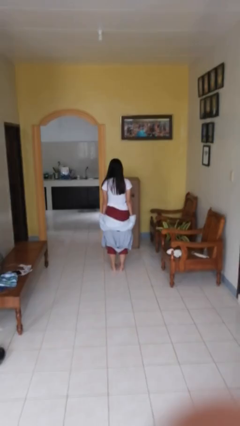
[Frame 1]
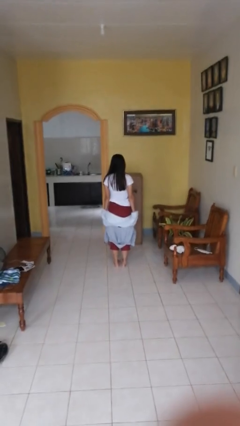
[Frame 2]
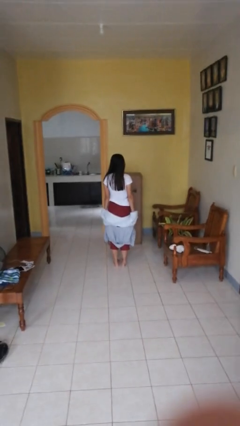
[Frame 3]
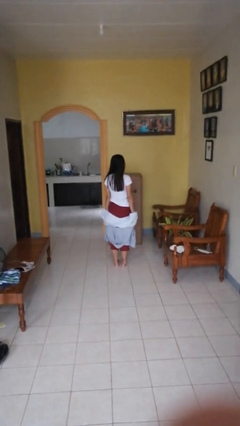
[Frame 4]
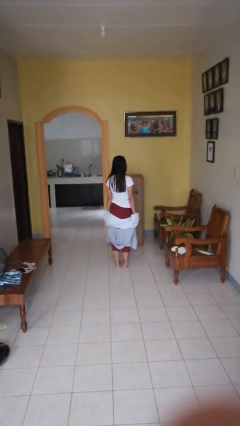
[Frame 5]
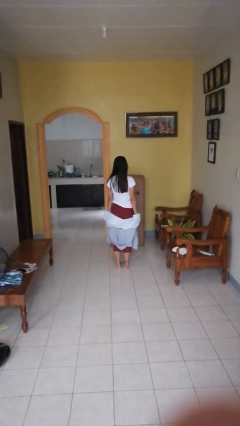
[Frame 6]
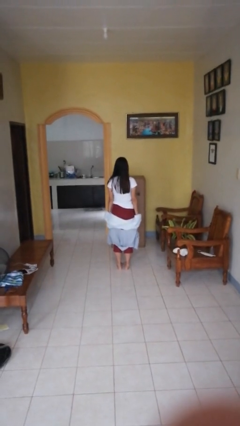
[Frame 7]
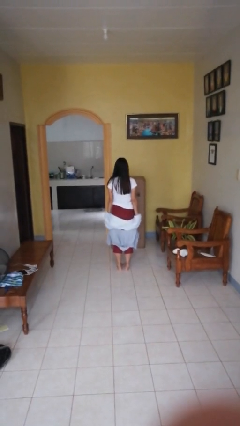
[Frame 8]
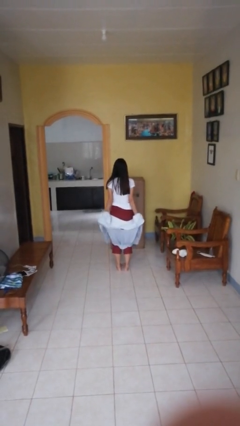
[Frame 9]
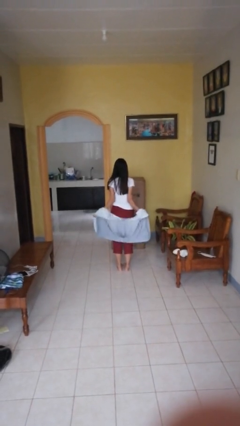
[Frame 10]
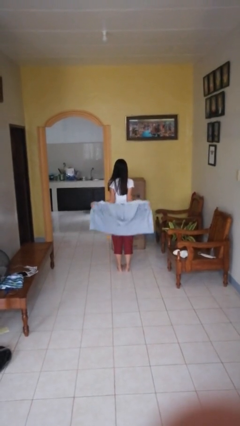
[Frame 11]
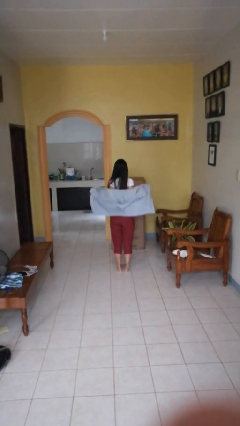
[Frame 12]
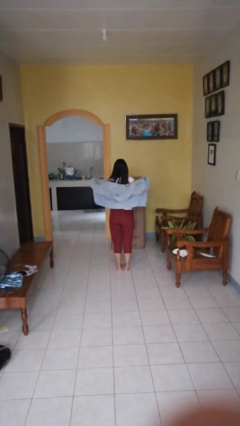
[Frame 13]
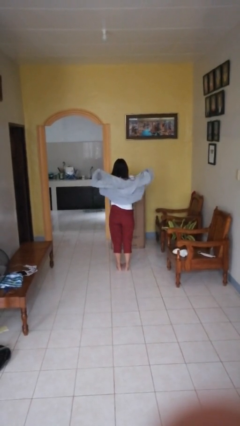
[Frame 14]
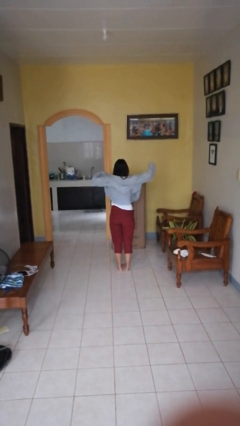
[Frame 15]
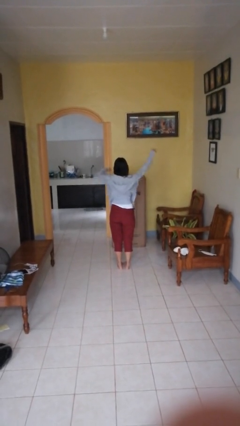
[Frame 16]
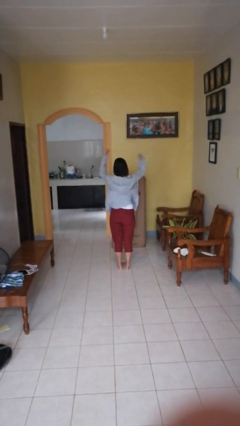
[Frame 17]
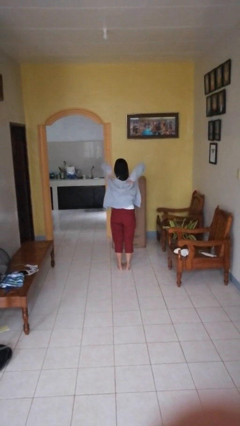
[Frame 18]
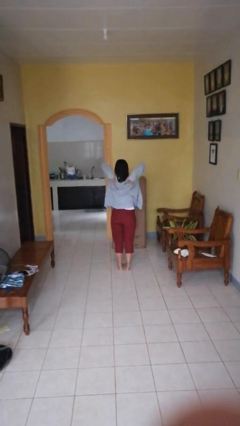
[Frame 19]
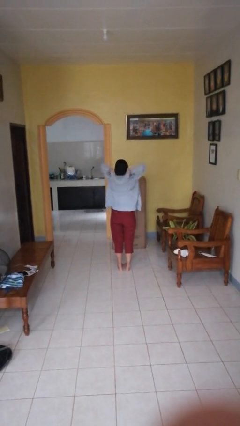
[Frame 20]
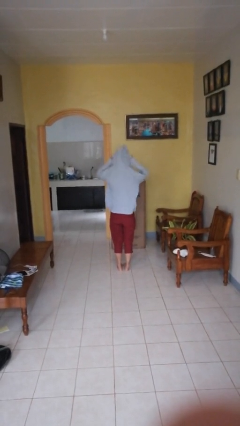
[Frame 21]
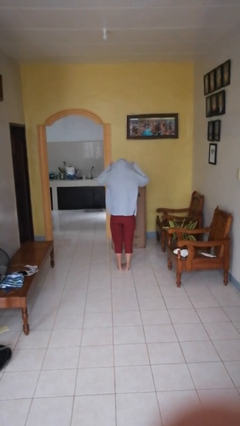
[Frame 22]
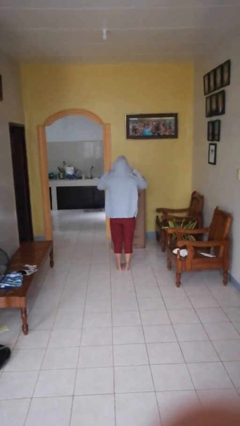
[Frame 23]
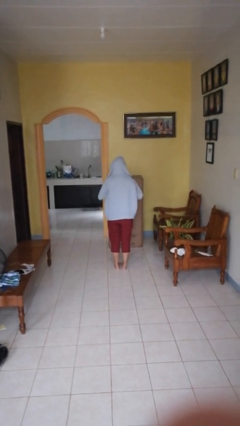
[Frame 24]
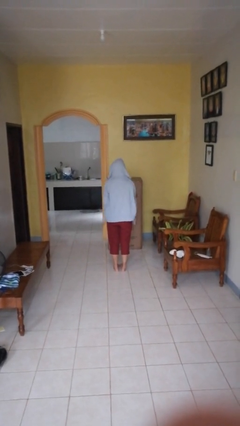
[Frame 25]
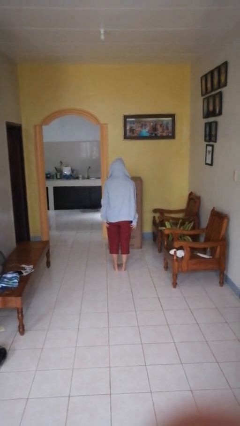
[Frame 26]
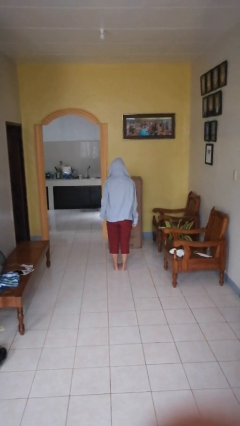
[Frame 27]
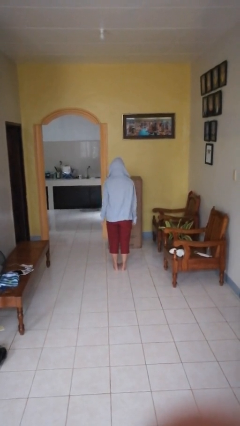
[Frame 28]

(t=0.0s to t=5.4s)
person puts on hoodie

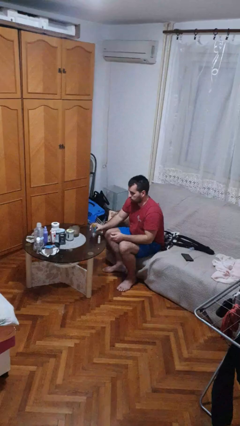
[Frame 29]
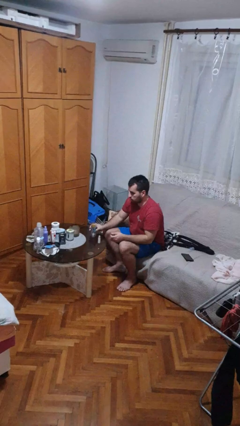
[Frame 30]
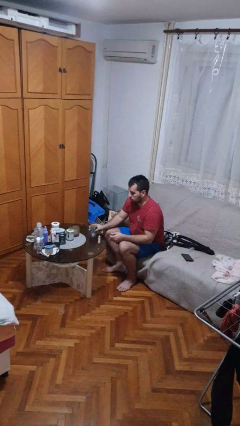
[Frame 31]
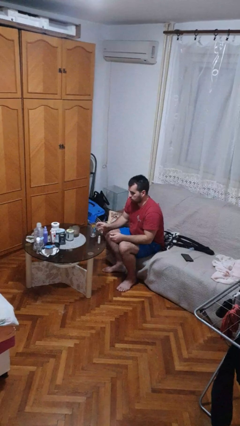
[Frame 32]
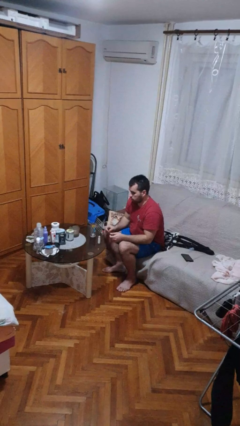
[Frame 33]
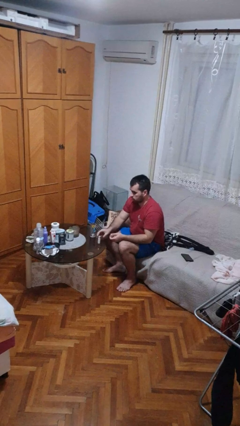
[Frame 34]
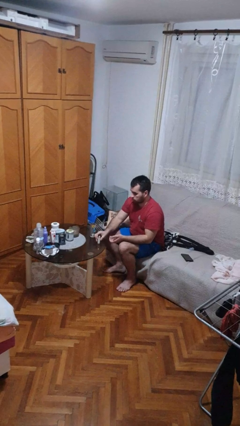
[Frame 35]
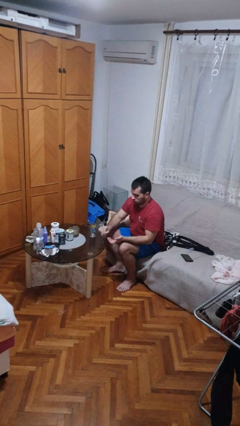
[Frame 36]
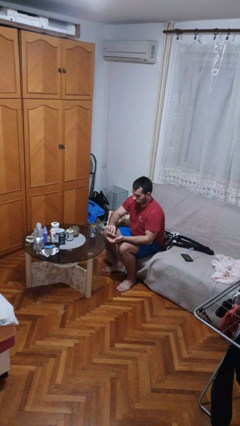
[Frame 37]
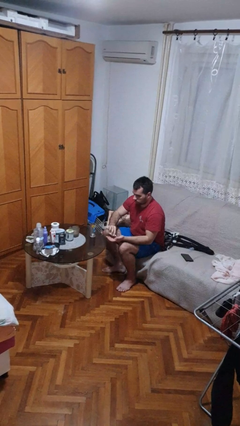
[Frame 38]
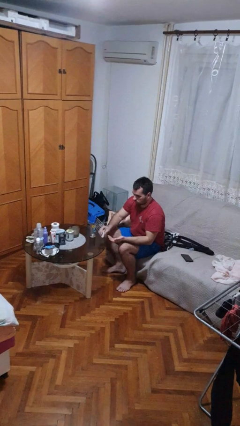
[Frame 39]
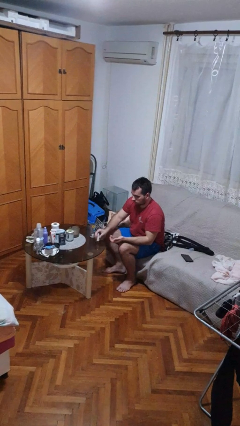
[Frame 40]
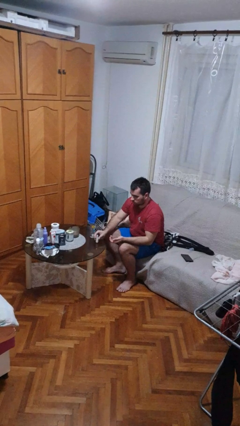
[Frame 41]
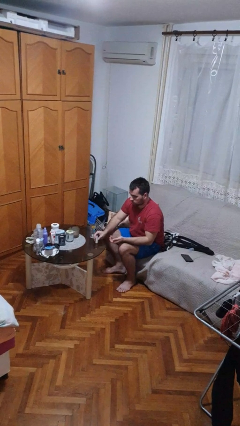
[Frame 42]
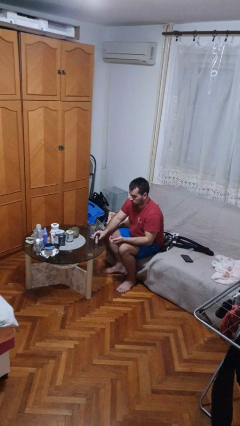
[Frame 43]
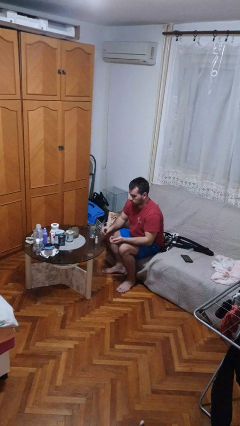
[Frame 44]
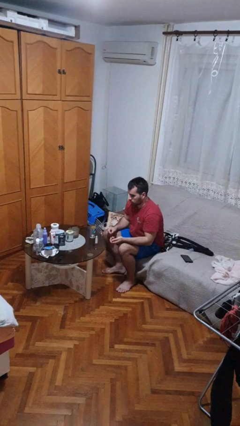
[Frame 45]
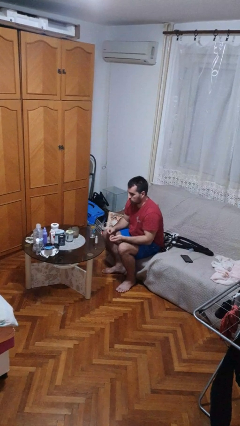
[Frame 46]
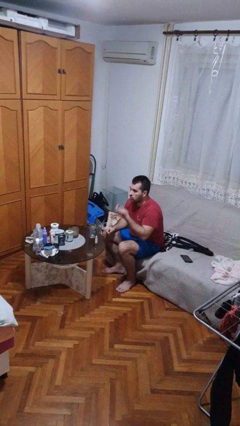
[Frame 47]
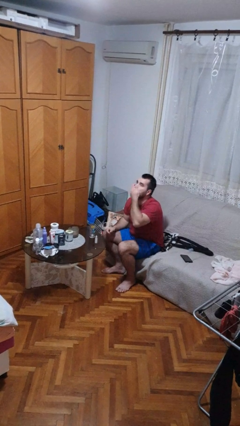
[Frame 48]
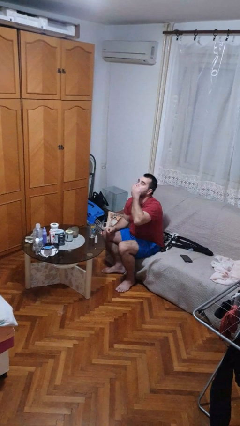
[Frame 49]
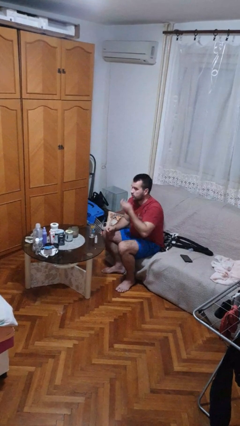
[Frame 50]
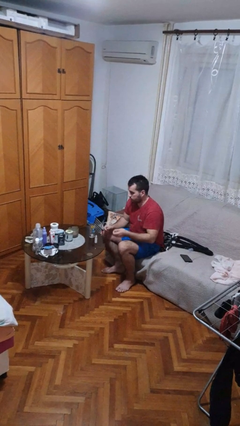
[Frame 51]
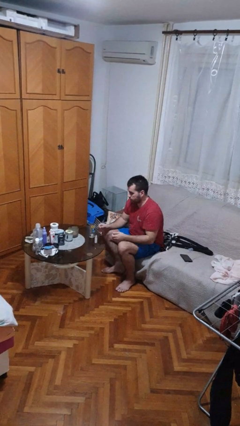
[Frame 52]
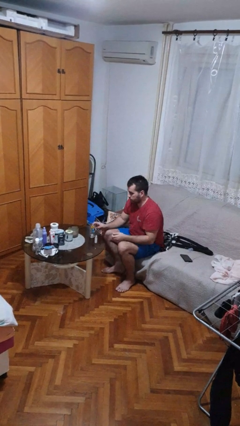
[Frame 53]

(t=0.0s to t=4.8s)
person takes medicine pills

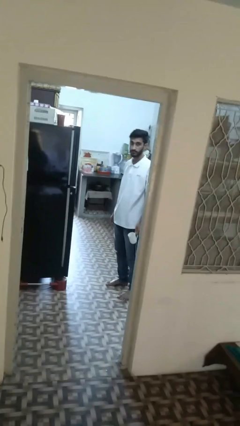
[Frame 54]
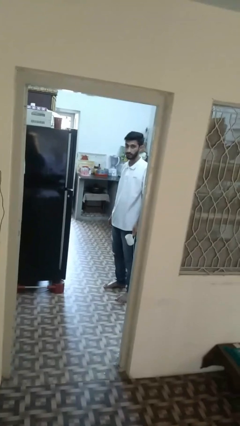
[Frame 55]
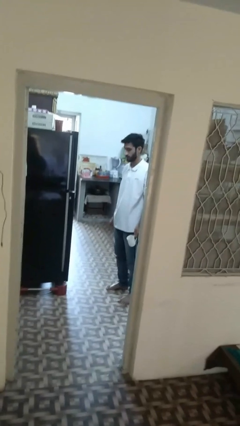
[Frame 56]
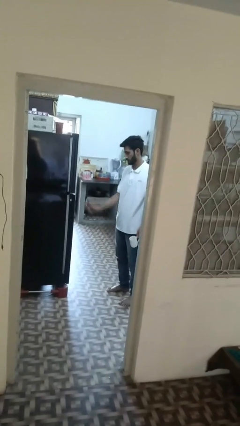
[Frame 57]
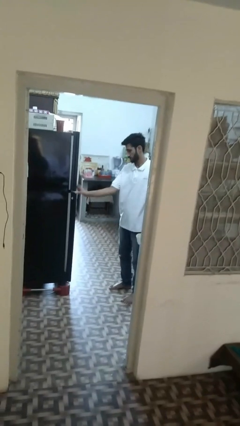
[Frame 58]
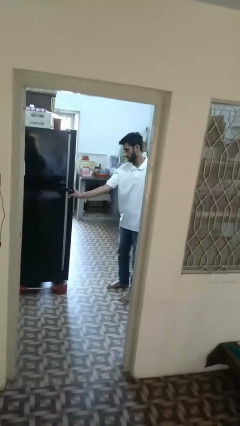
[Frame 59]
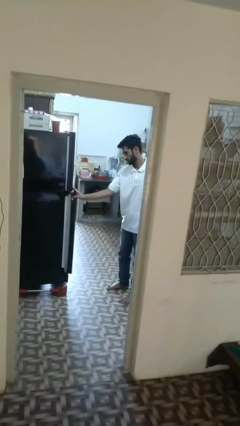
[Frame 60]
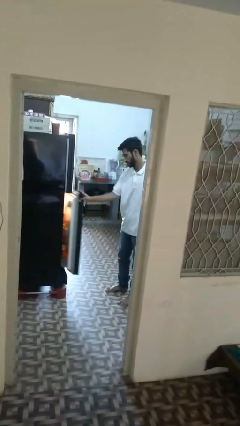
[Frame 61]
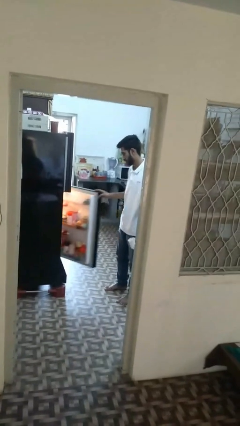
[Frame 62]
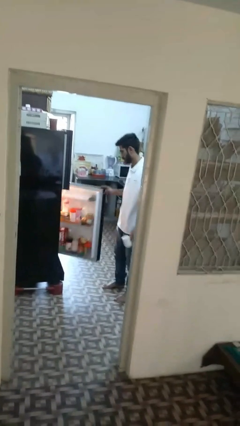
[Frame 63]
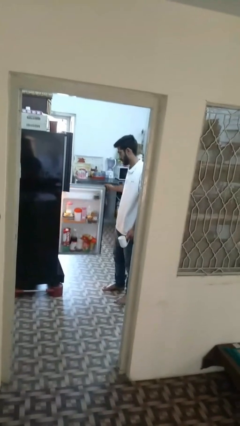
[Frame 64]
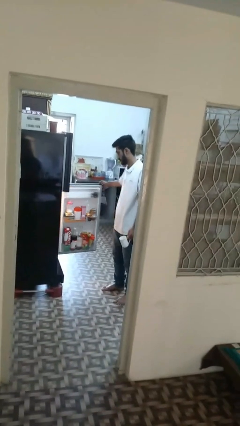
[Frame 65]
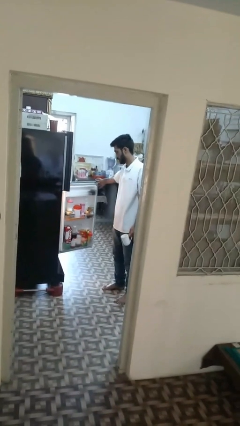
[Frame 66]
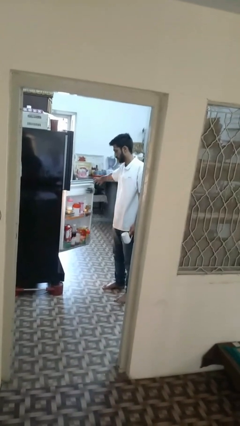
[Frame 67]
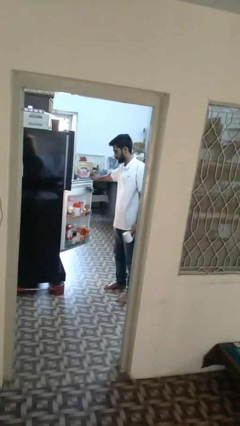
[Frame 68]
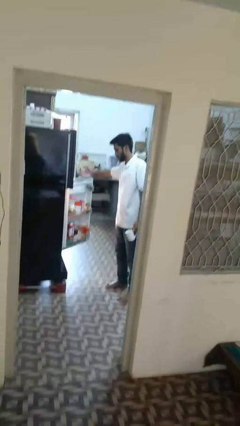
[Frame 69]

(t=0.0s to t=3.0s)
person opens refrigerator

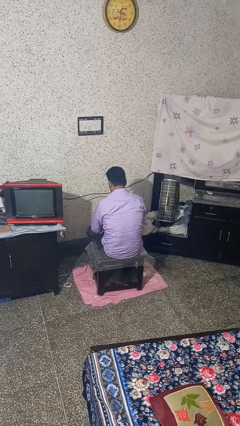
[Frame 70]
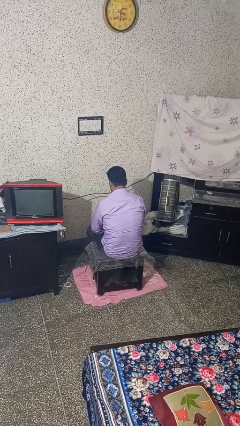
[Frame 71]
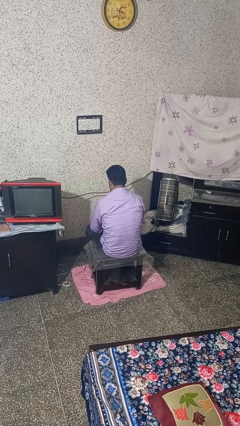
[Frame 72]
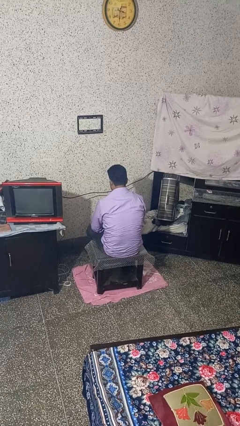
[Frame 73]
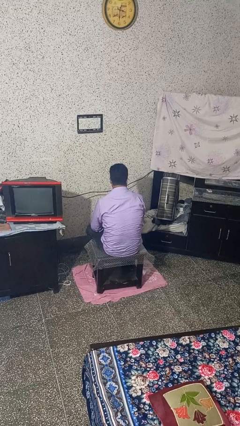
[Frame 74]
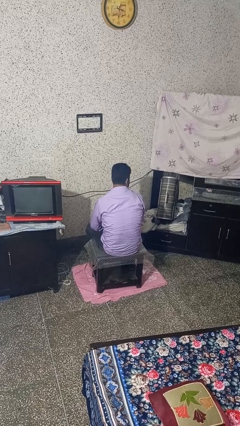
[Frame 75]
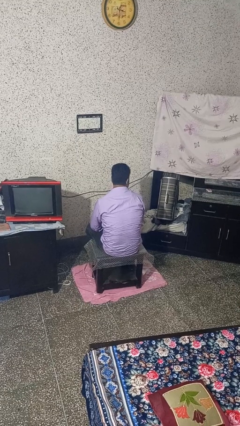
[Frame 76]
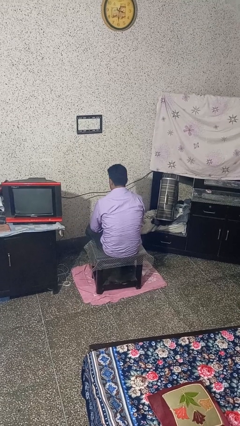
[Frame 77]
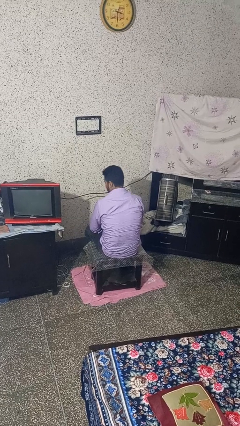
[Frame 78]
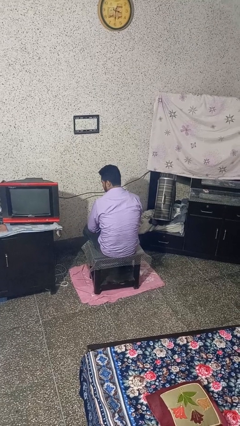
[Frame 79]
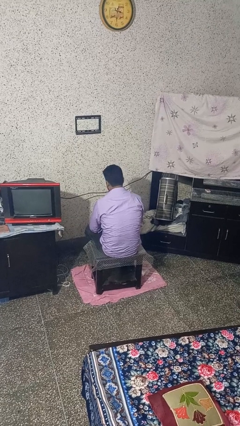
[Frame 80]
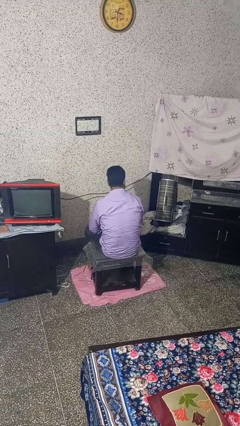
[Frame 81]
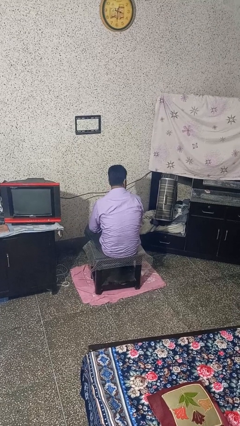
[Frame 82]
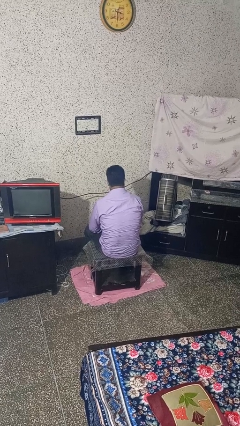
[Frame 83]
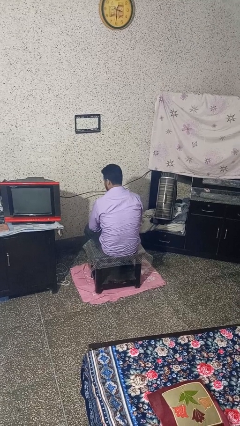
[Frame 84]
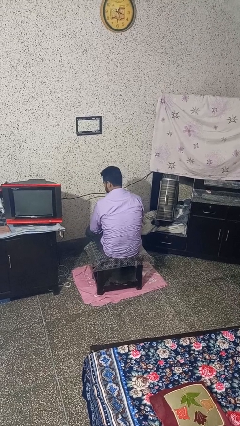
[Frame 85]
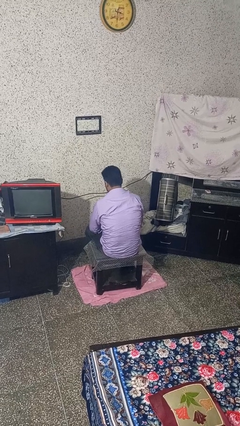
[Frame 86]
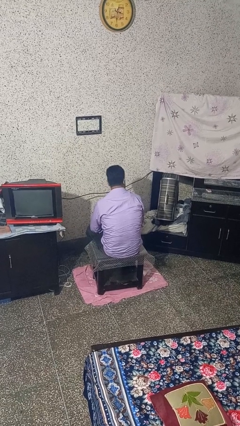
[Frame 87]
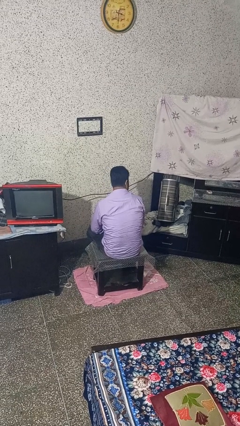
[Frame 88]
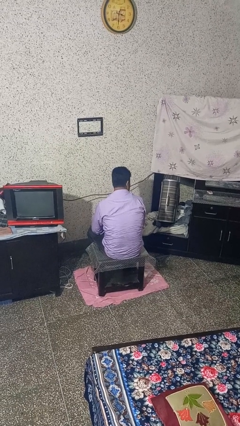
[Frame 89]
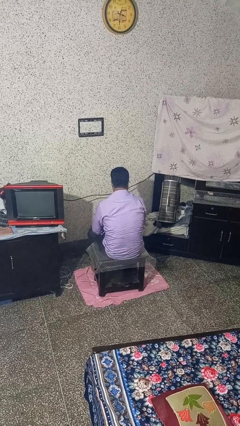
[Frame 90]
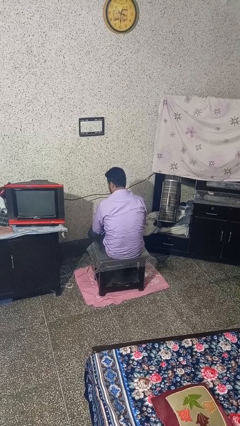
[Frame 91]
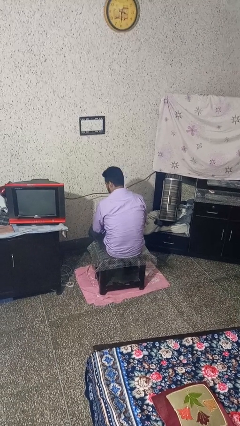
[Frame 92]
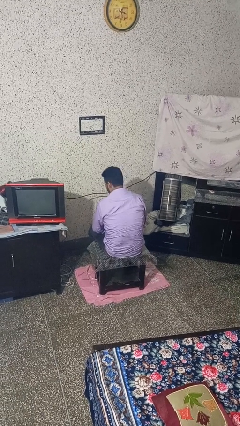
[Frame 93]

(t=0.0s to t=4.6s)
person shakes head
